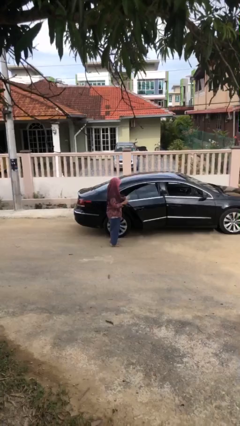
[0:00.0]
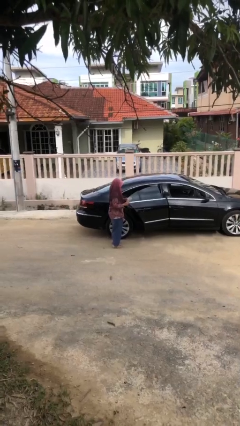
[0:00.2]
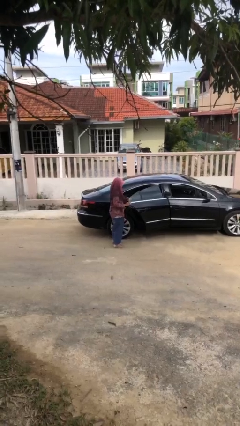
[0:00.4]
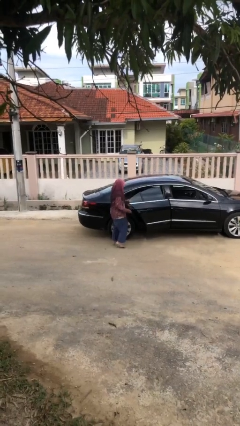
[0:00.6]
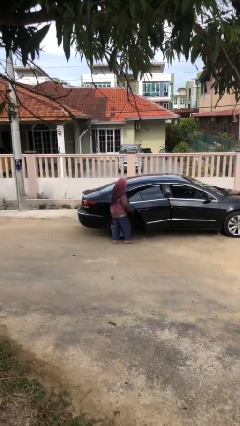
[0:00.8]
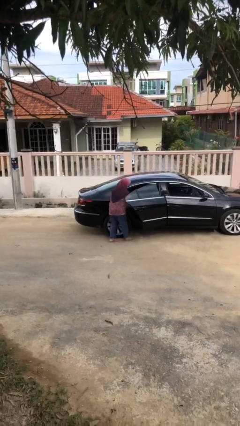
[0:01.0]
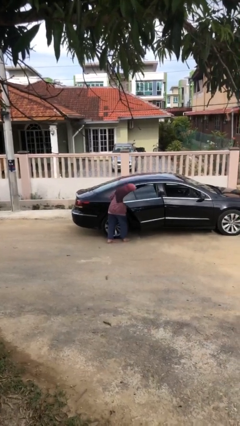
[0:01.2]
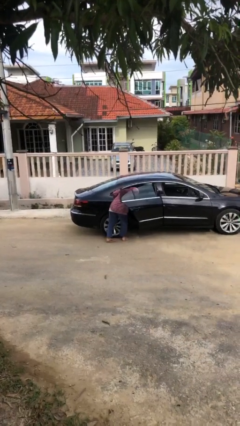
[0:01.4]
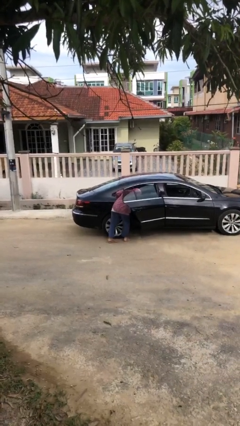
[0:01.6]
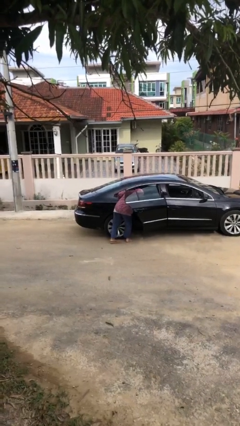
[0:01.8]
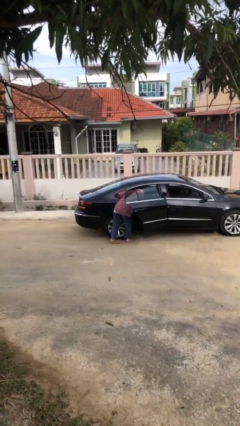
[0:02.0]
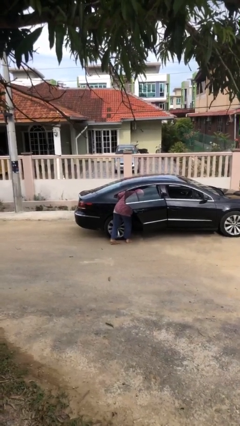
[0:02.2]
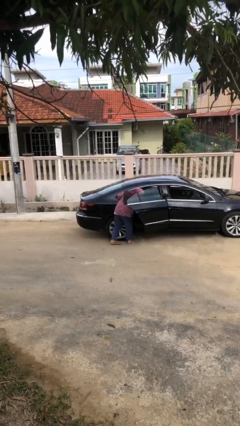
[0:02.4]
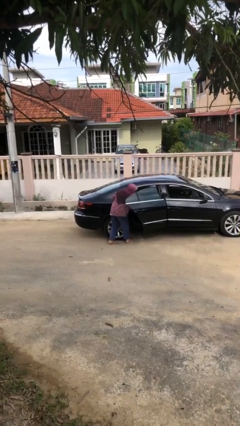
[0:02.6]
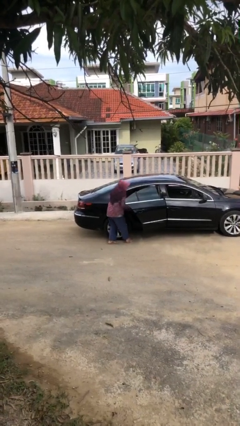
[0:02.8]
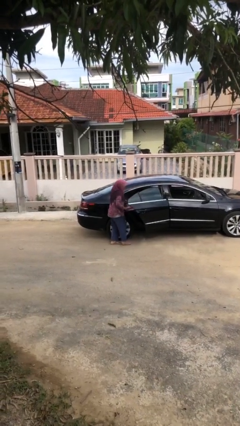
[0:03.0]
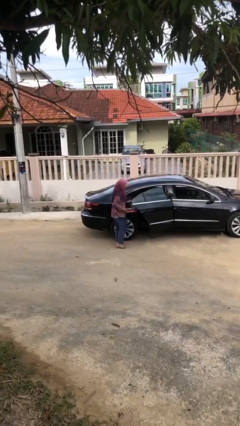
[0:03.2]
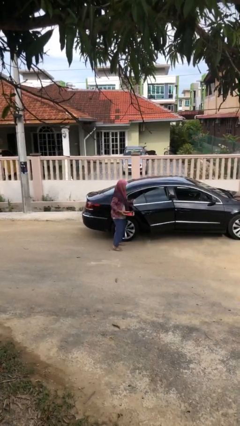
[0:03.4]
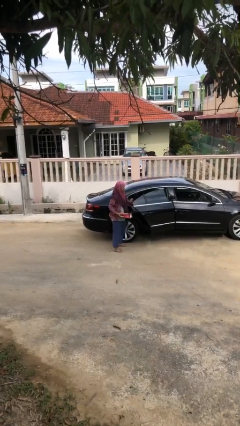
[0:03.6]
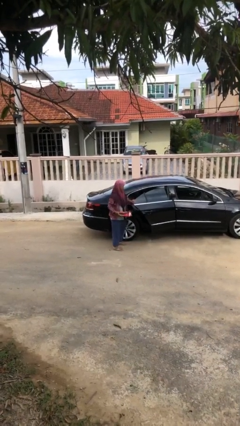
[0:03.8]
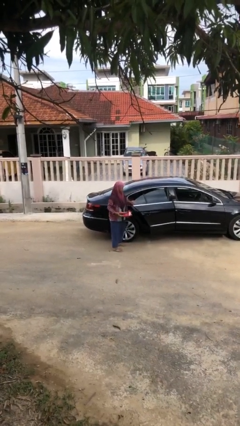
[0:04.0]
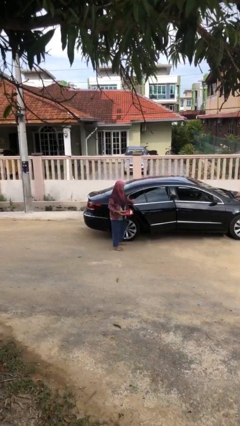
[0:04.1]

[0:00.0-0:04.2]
person unloads car

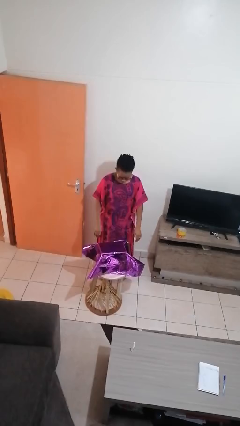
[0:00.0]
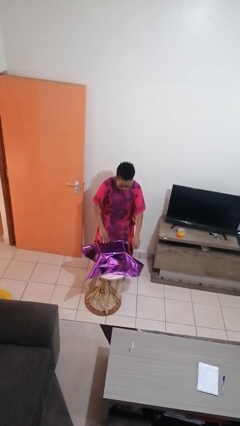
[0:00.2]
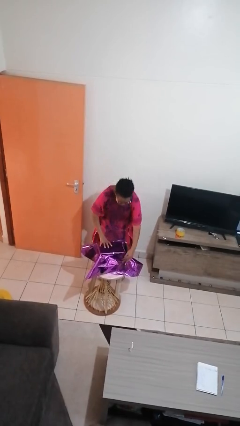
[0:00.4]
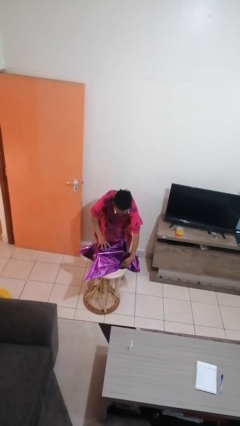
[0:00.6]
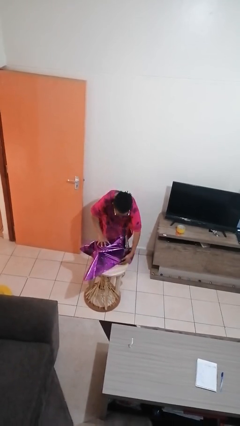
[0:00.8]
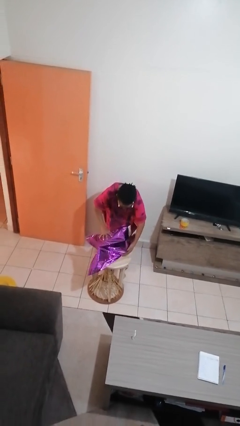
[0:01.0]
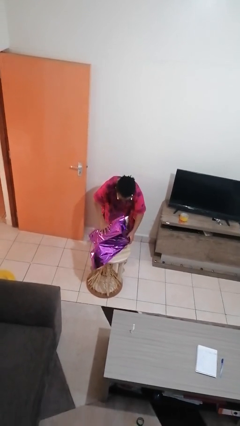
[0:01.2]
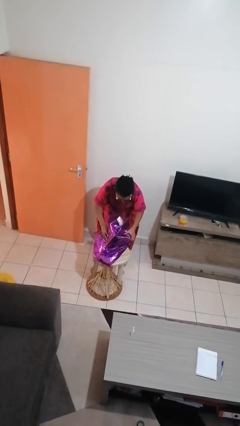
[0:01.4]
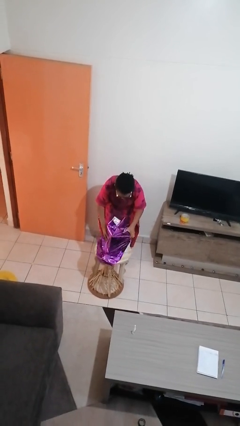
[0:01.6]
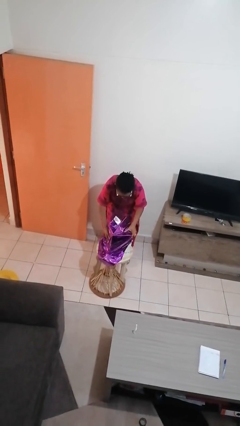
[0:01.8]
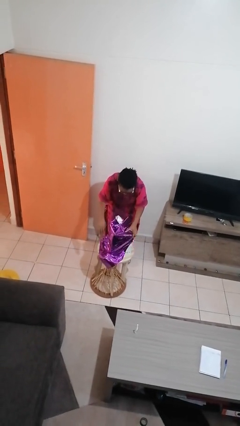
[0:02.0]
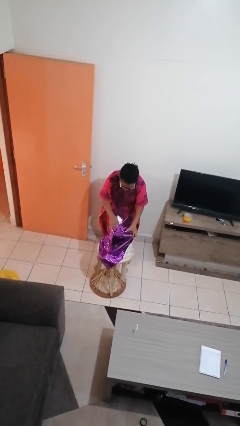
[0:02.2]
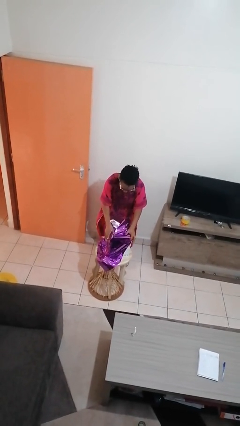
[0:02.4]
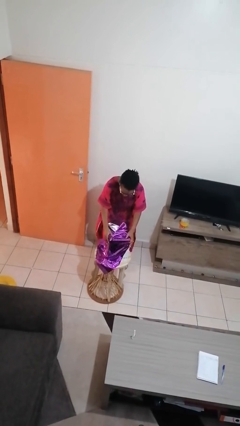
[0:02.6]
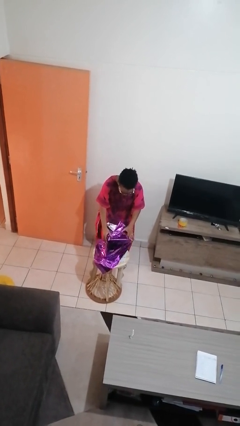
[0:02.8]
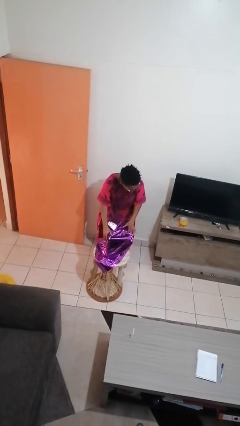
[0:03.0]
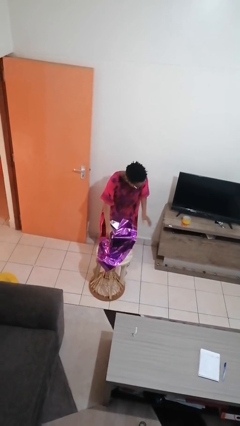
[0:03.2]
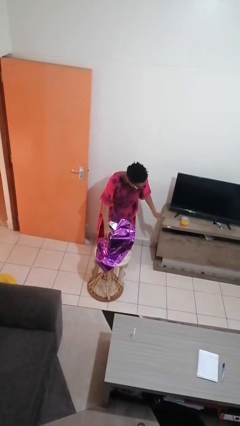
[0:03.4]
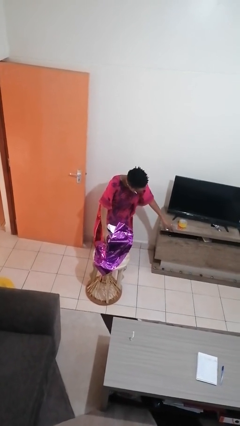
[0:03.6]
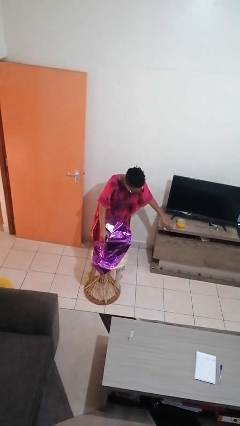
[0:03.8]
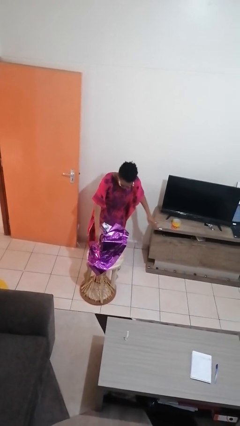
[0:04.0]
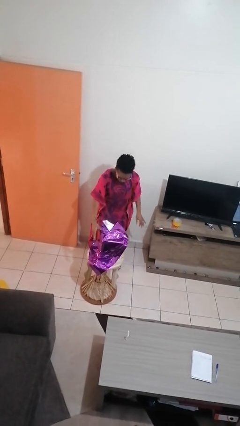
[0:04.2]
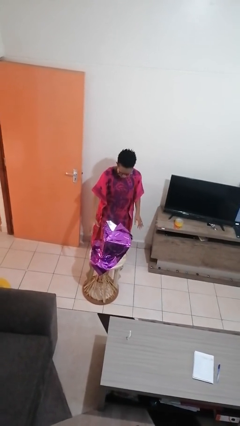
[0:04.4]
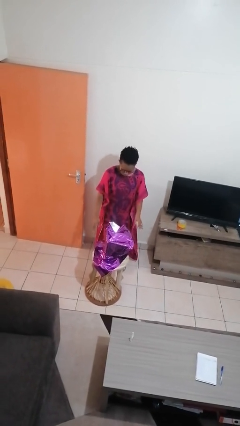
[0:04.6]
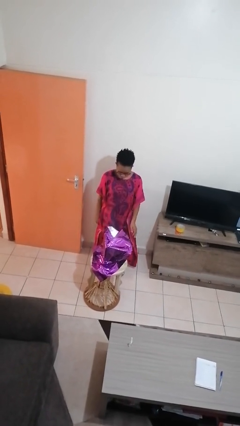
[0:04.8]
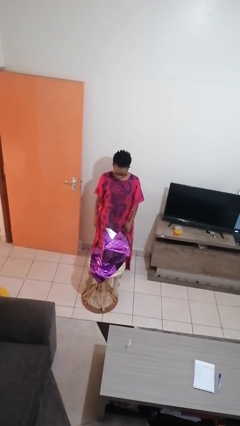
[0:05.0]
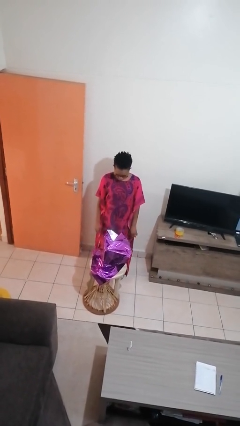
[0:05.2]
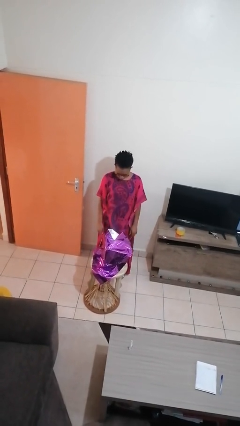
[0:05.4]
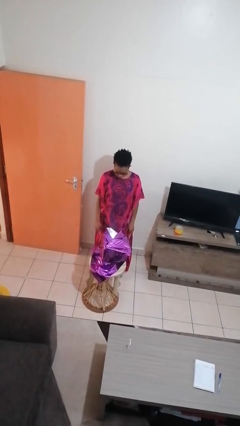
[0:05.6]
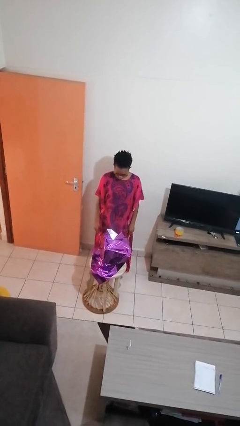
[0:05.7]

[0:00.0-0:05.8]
person wraps box

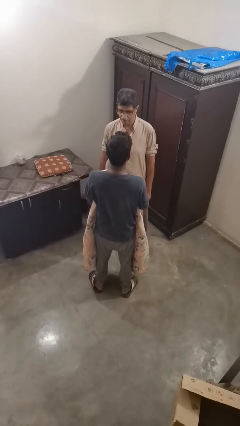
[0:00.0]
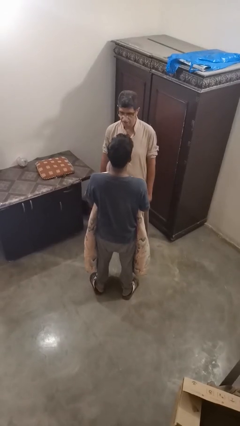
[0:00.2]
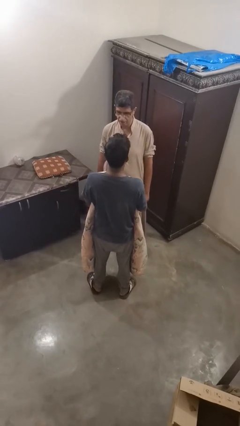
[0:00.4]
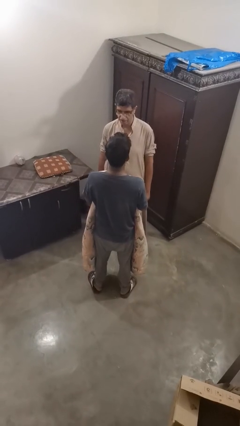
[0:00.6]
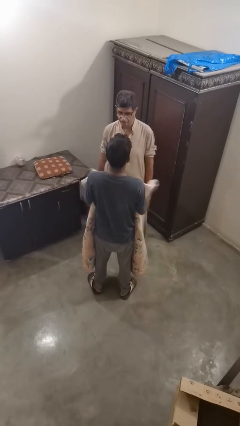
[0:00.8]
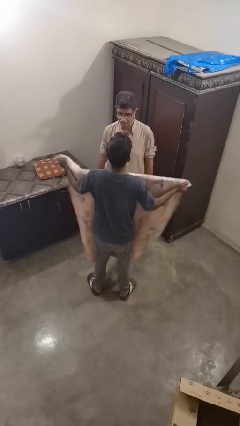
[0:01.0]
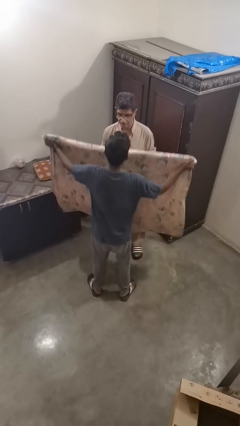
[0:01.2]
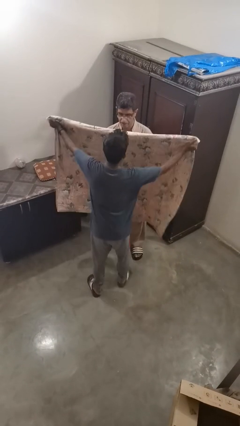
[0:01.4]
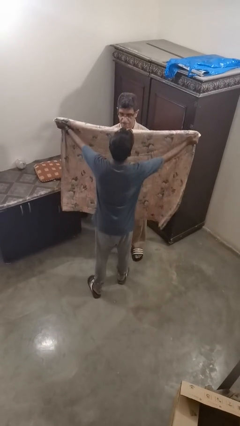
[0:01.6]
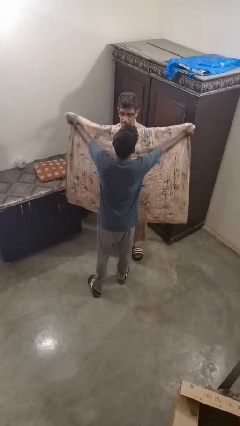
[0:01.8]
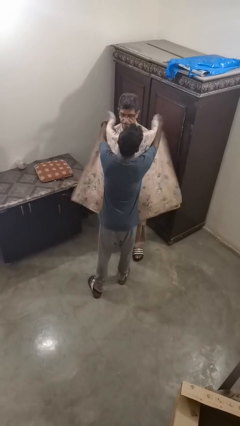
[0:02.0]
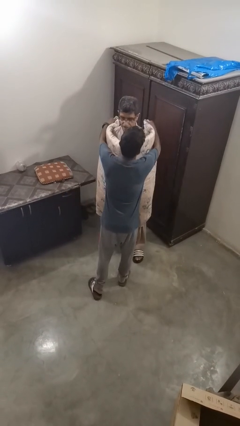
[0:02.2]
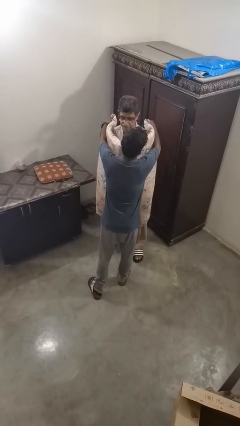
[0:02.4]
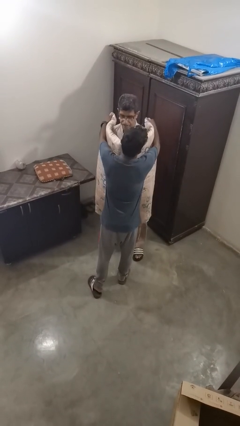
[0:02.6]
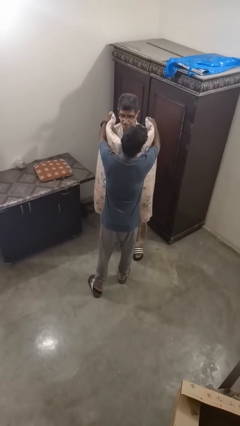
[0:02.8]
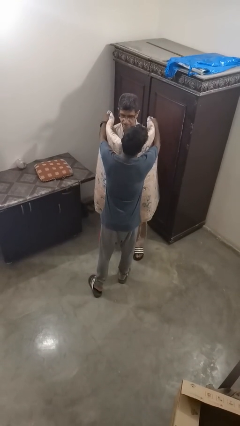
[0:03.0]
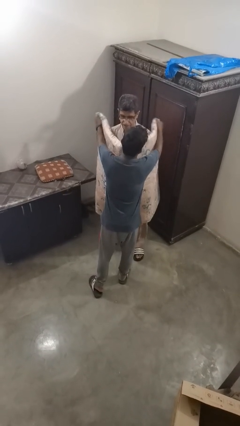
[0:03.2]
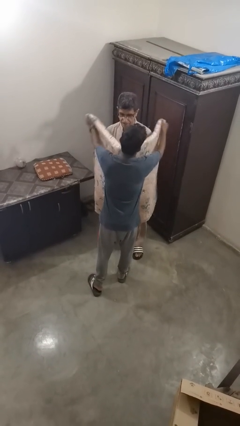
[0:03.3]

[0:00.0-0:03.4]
person covers friend with blanket

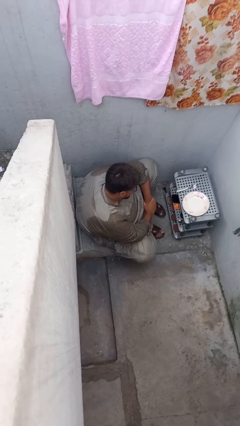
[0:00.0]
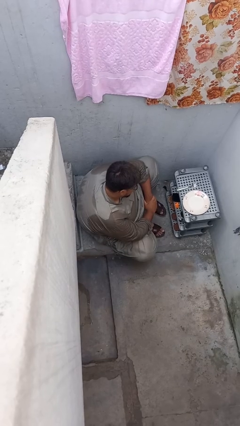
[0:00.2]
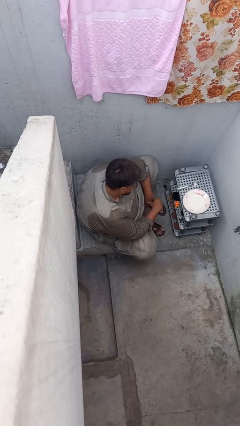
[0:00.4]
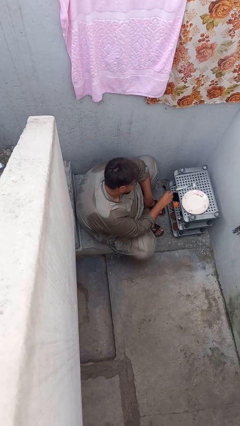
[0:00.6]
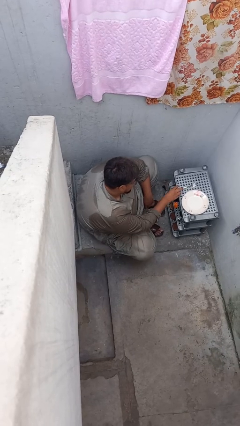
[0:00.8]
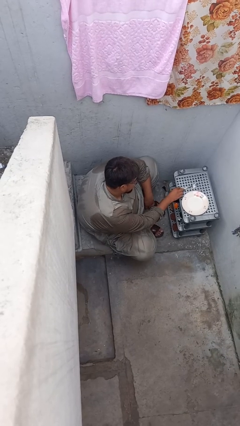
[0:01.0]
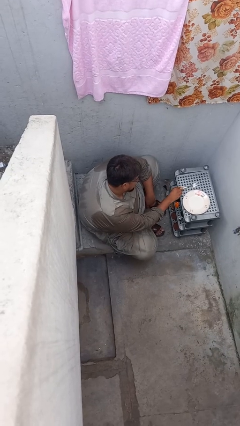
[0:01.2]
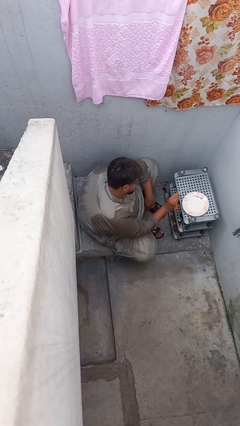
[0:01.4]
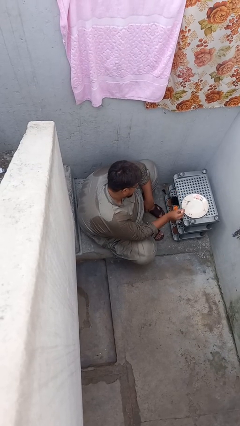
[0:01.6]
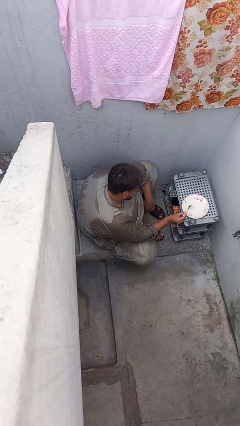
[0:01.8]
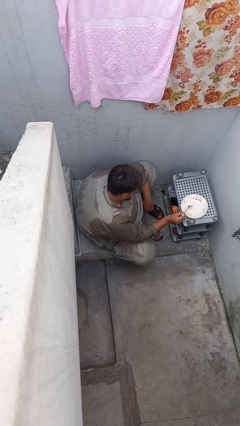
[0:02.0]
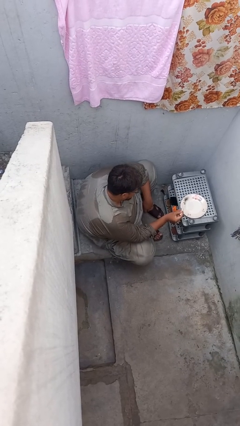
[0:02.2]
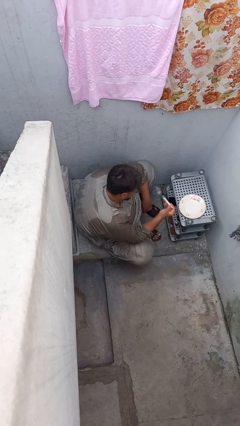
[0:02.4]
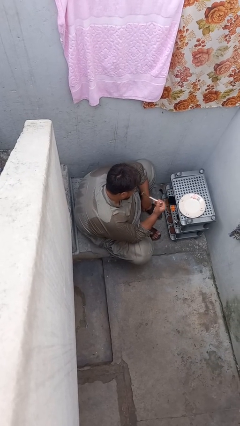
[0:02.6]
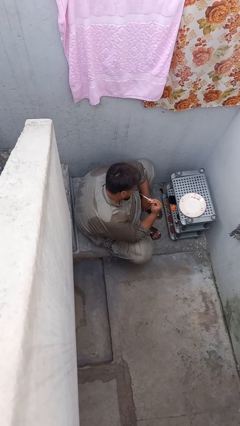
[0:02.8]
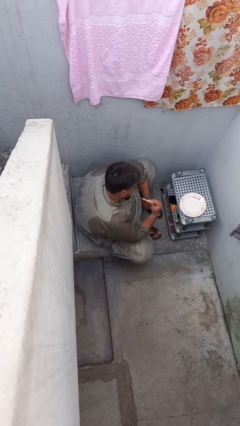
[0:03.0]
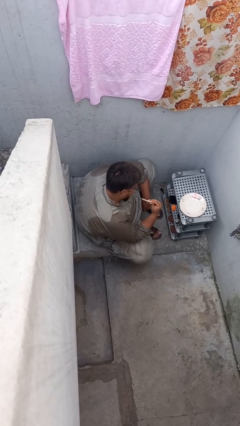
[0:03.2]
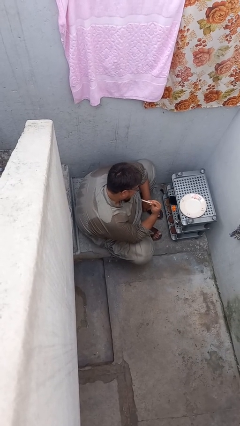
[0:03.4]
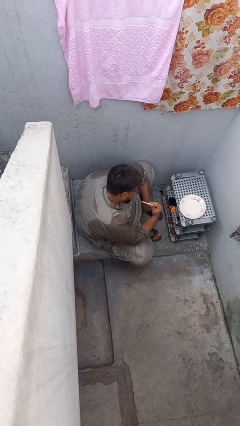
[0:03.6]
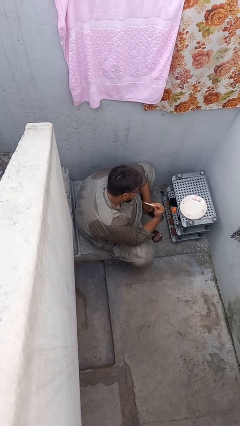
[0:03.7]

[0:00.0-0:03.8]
person eats with utensil

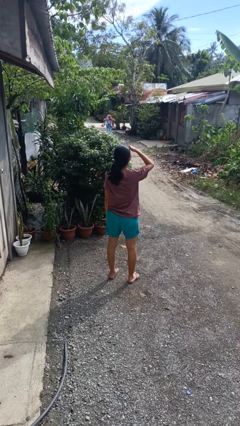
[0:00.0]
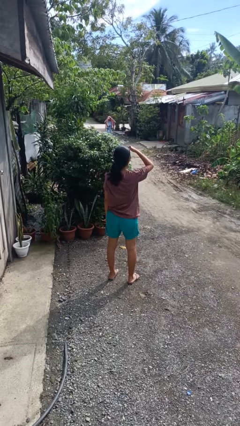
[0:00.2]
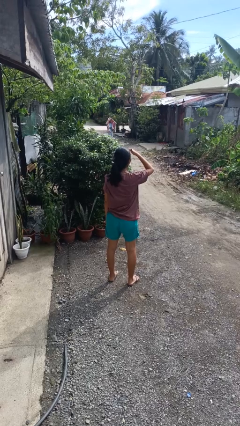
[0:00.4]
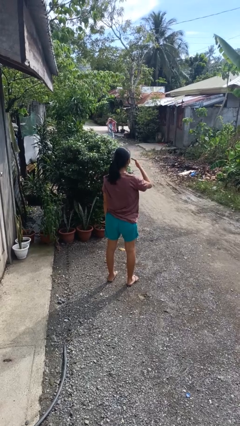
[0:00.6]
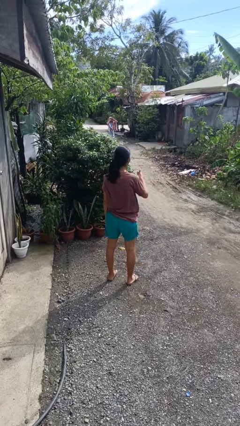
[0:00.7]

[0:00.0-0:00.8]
person shades eyes
